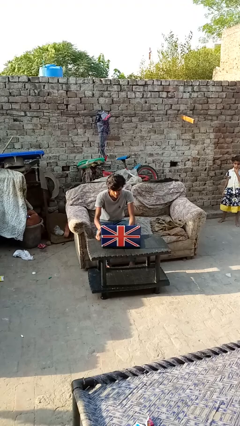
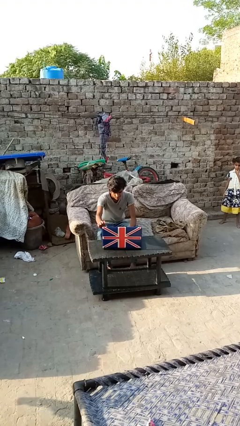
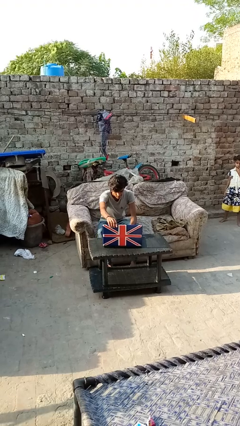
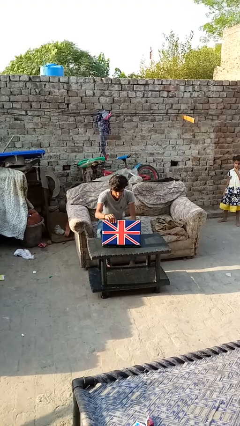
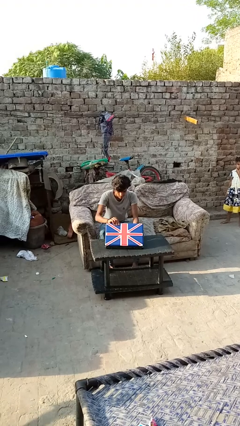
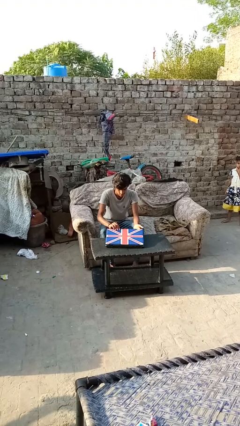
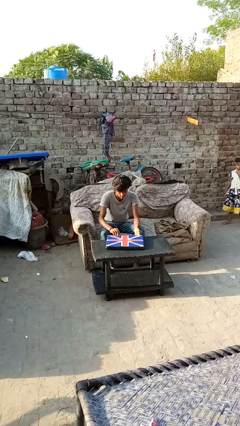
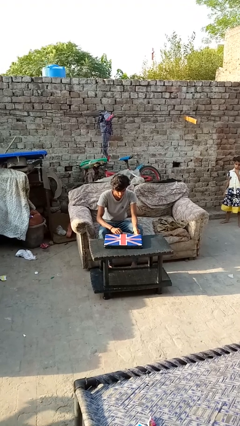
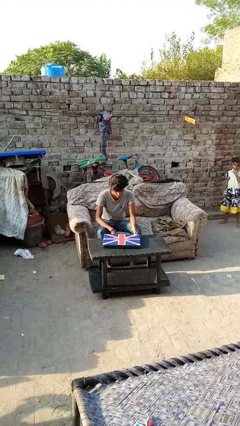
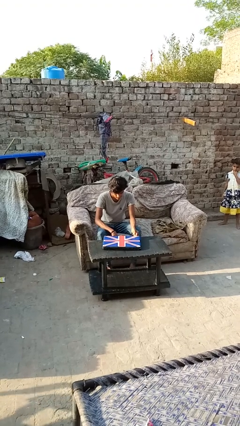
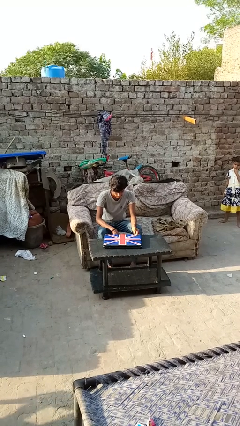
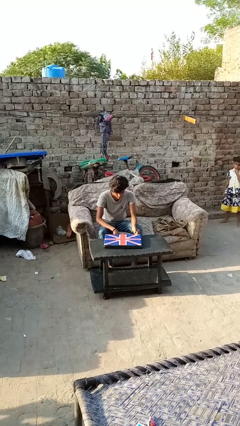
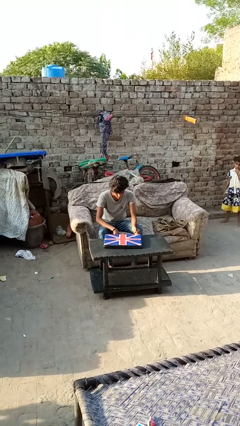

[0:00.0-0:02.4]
person closes laptop

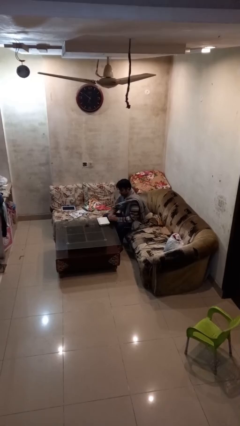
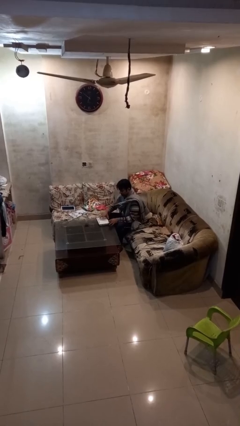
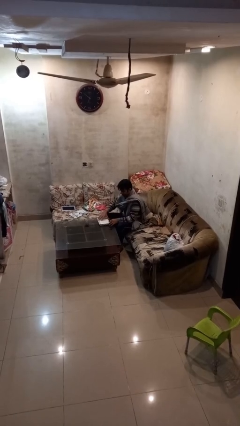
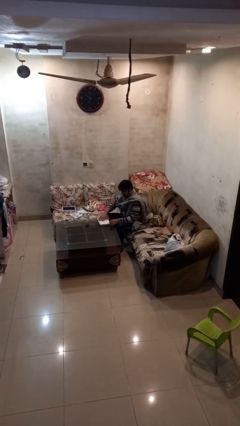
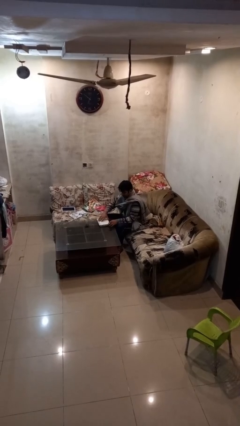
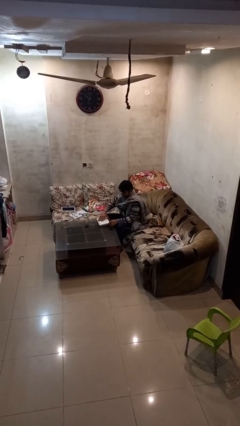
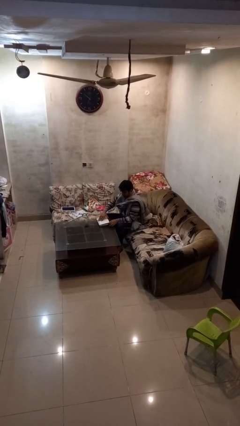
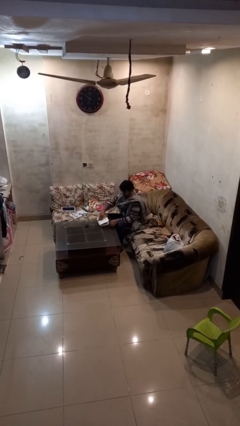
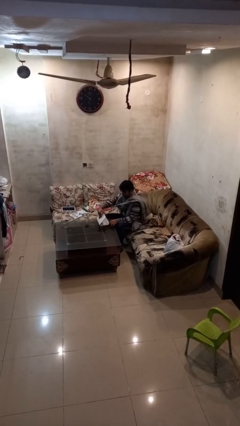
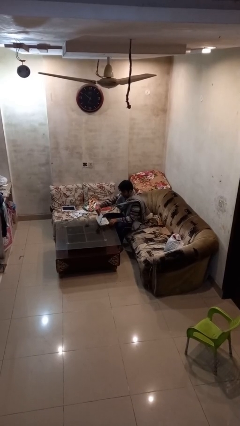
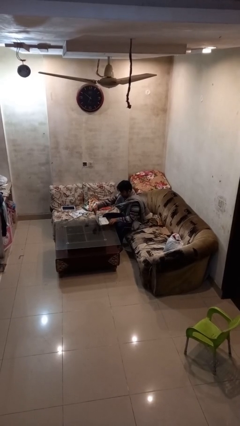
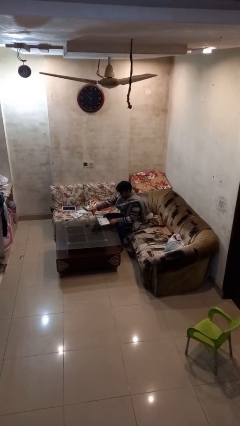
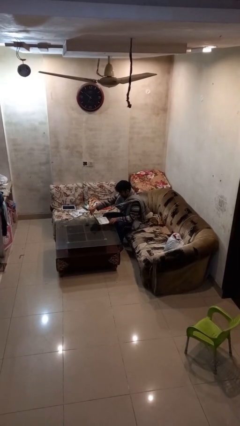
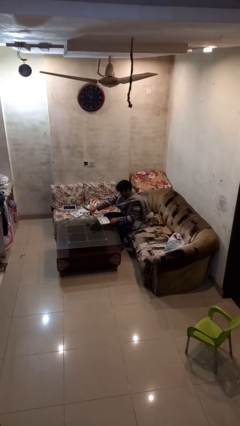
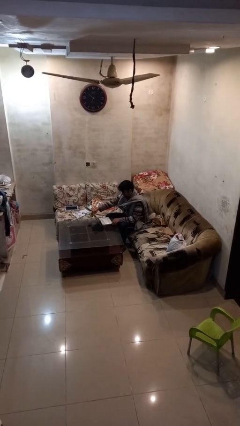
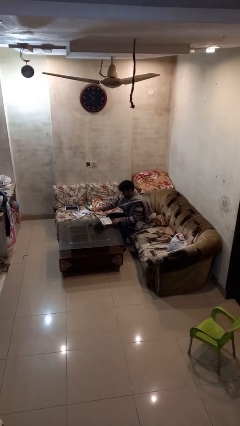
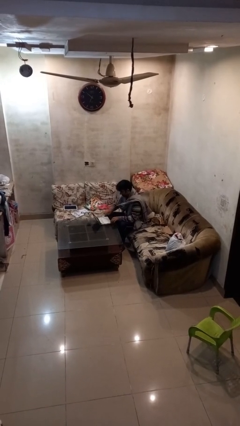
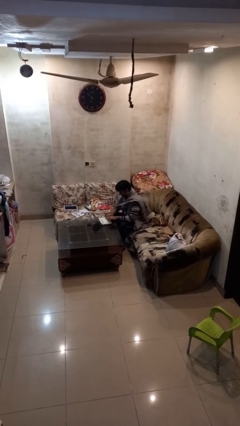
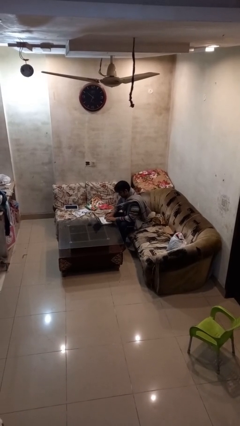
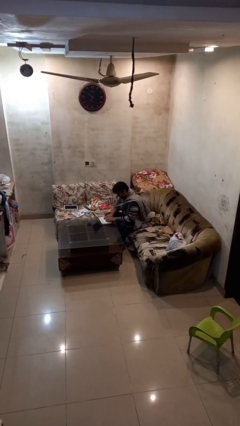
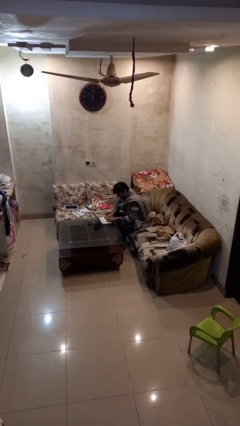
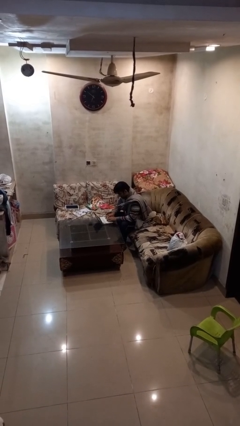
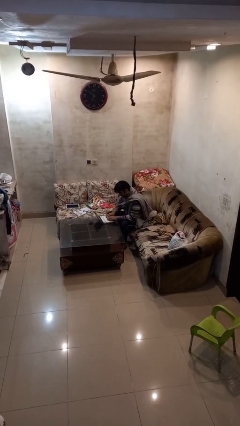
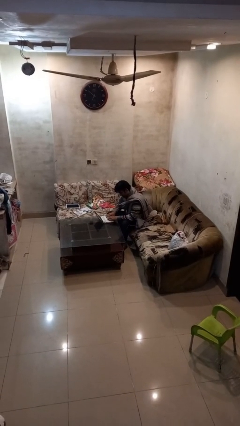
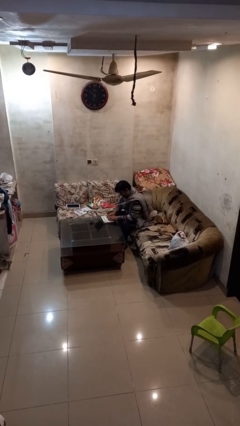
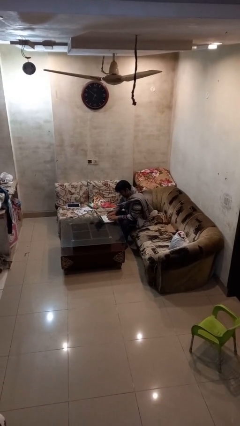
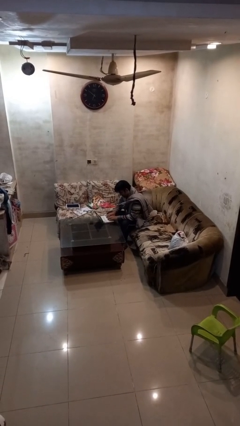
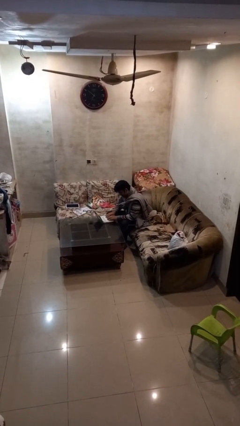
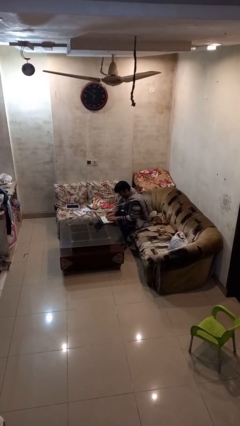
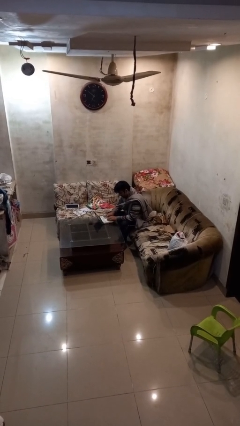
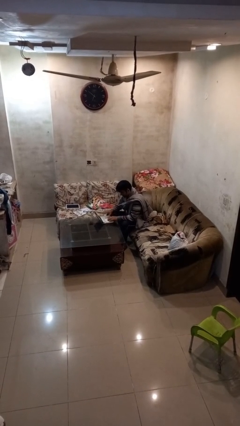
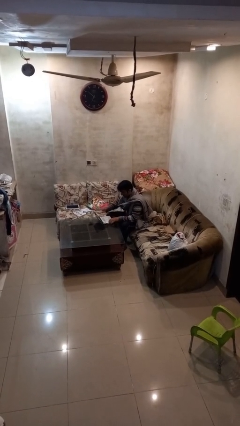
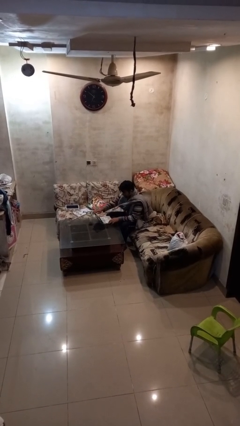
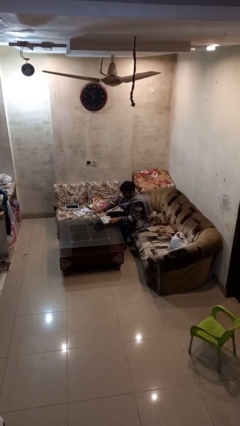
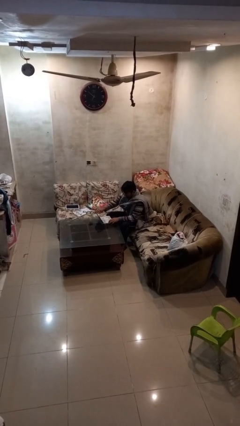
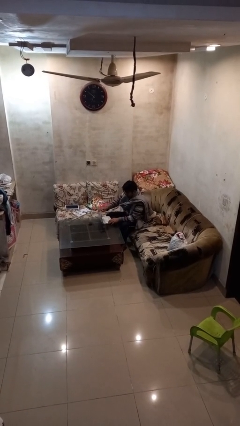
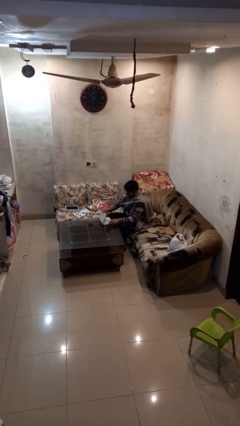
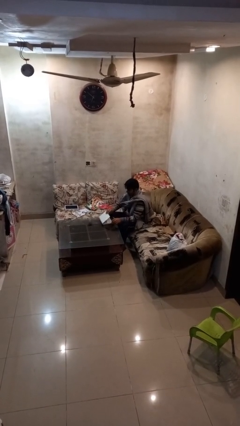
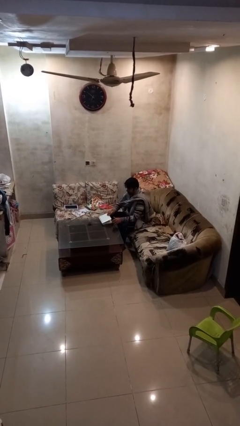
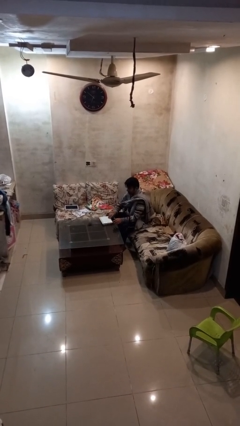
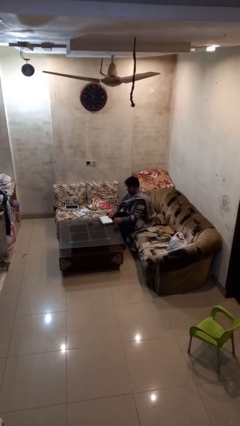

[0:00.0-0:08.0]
person interacts with laptop

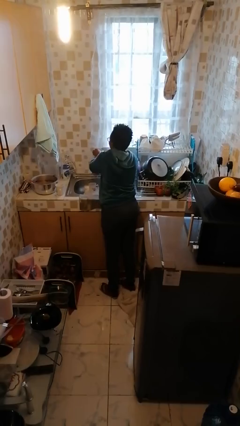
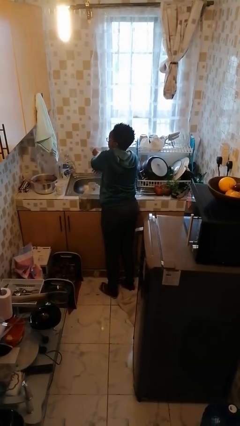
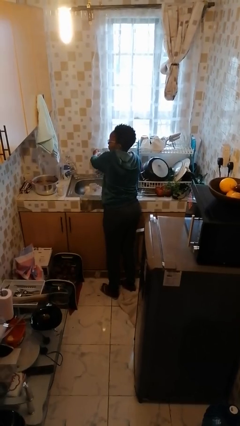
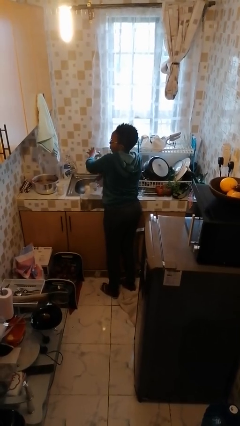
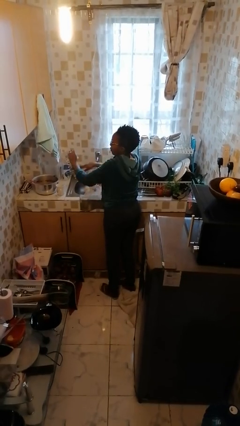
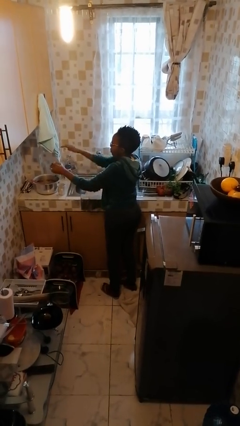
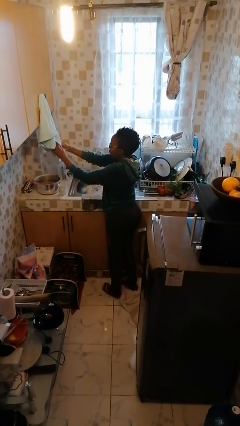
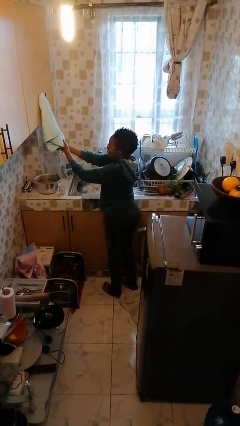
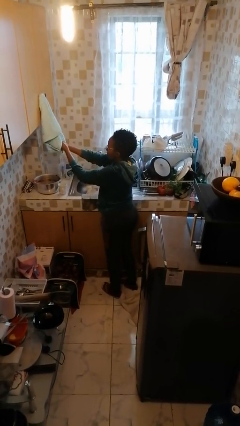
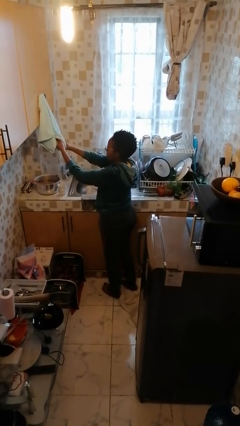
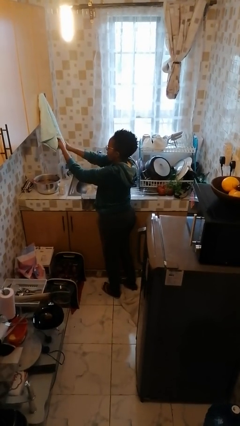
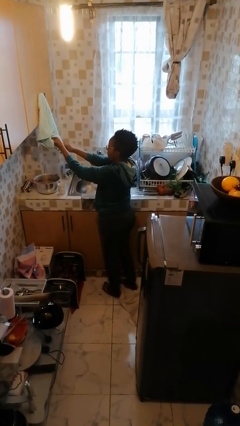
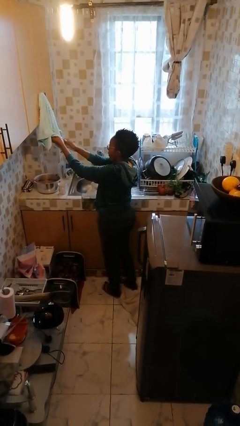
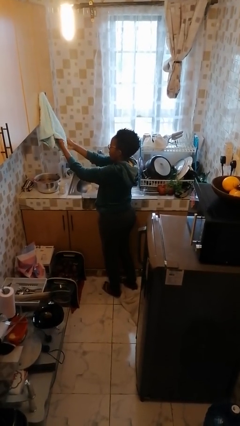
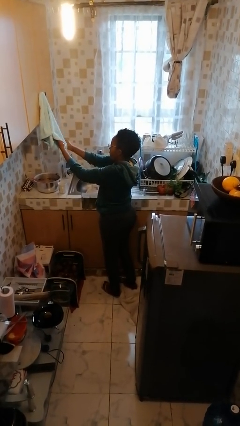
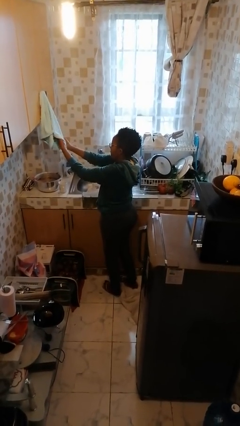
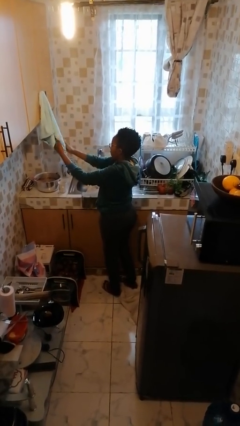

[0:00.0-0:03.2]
person dries hands with towel

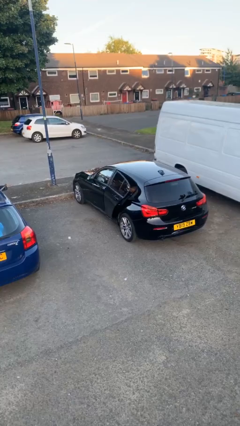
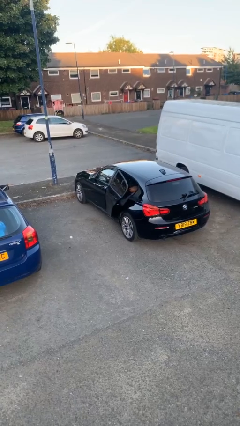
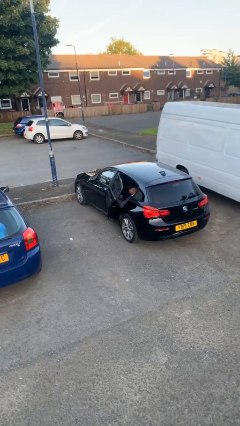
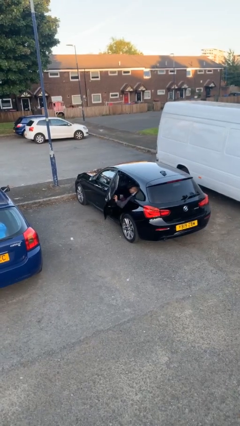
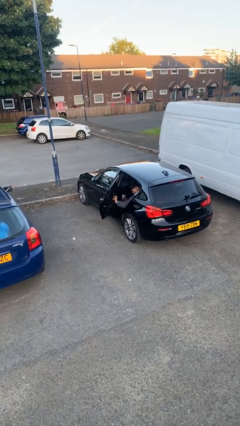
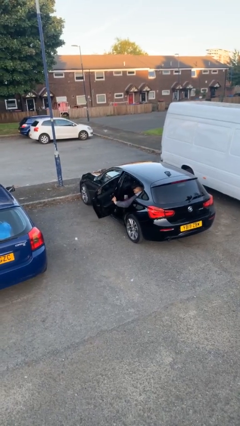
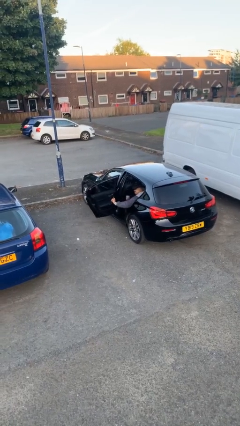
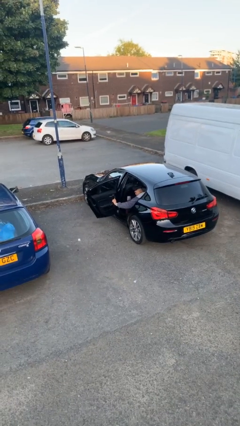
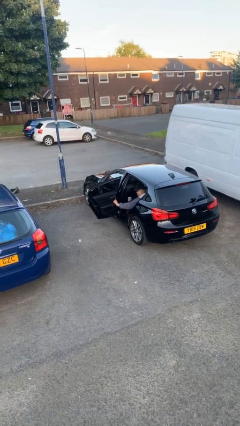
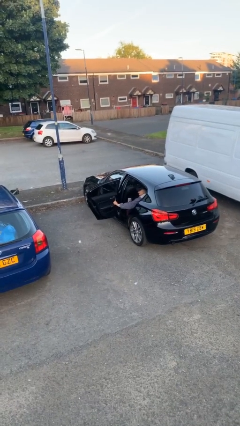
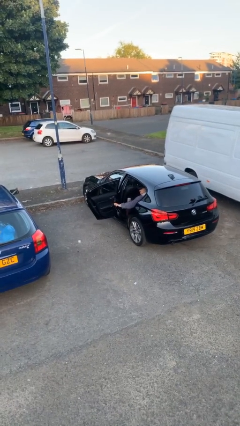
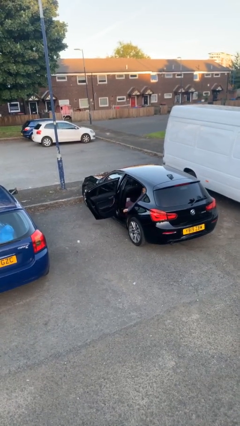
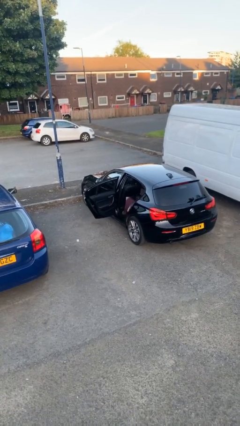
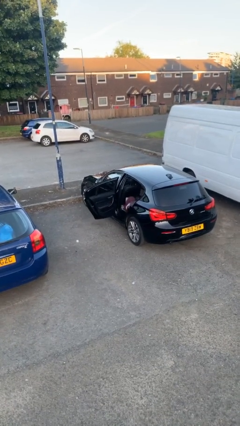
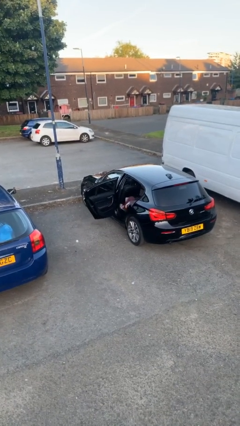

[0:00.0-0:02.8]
person opens car door

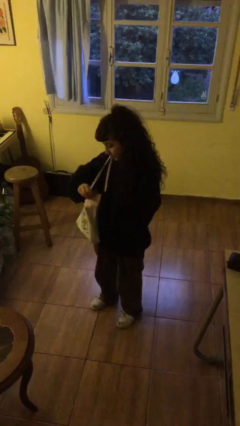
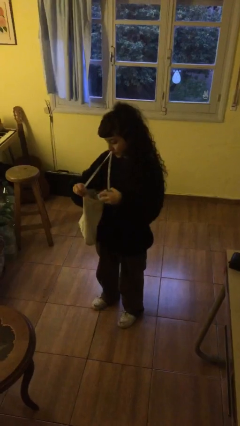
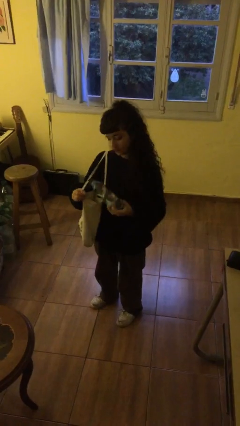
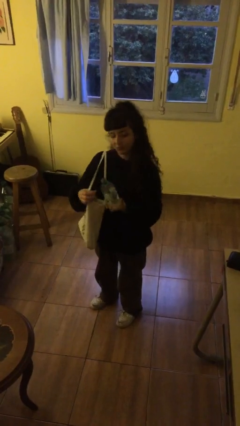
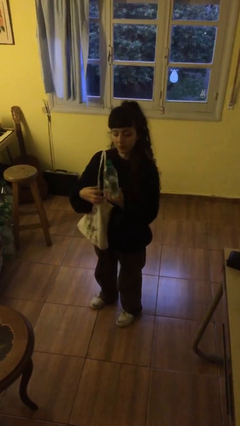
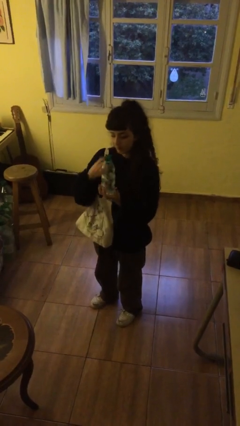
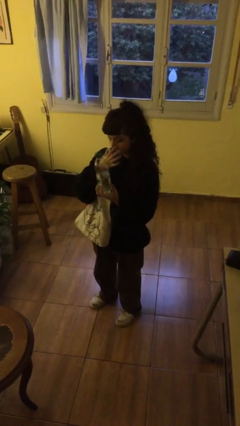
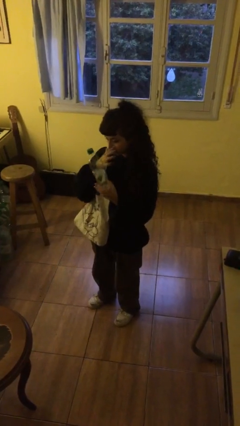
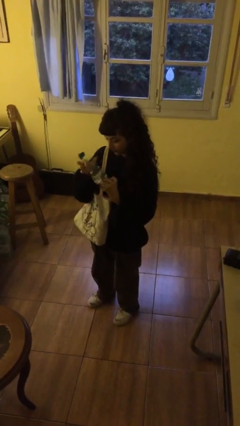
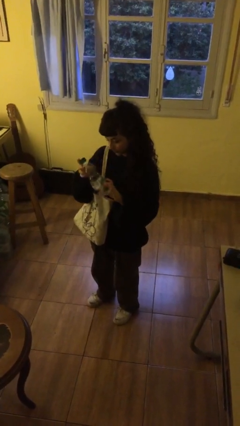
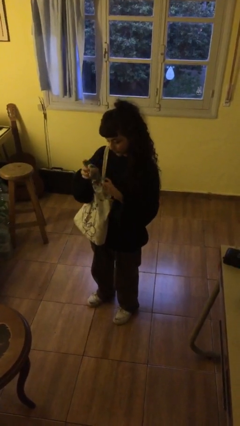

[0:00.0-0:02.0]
person takes object from purse
